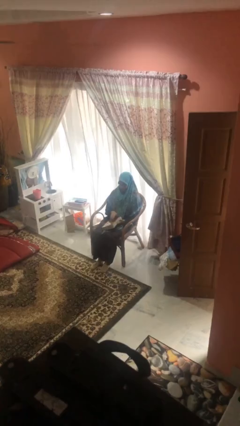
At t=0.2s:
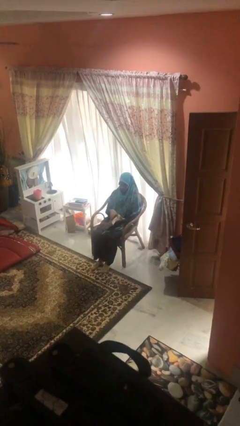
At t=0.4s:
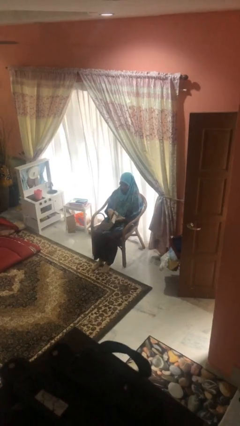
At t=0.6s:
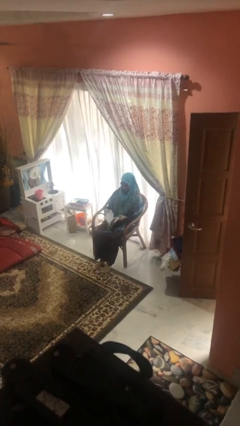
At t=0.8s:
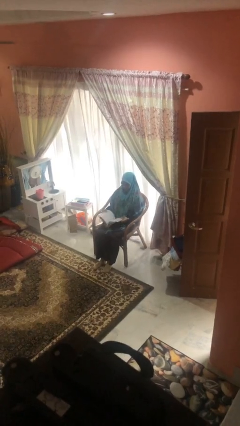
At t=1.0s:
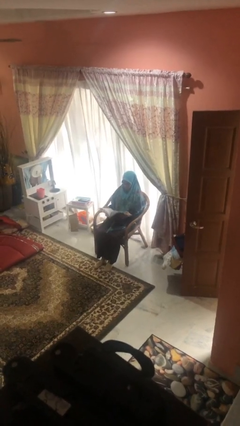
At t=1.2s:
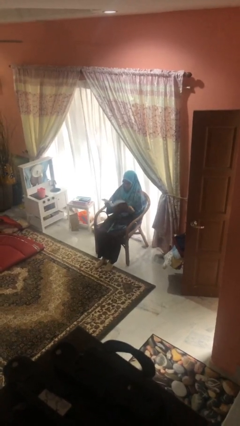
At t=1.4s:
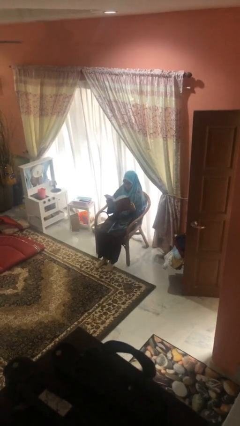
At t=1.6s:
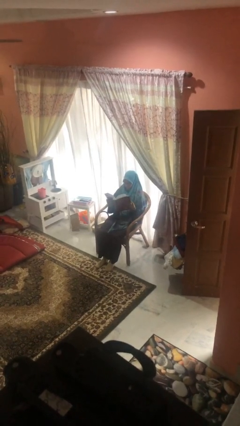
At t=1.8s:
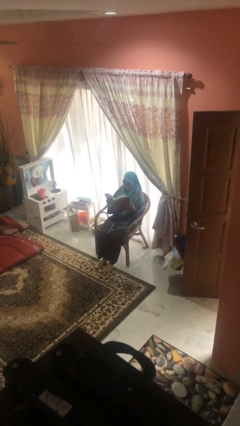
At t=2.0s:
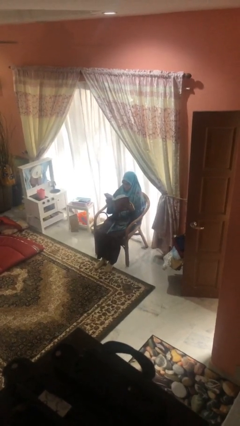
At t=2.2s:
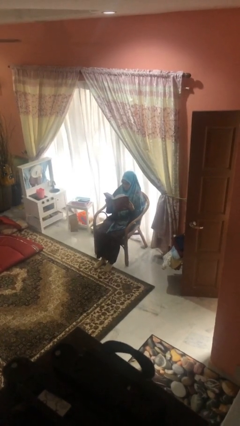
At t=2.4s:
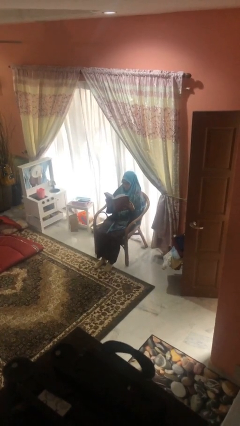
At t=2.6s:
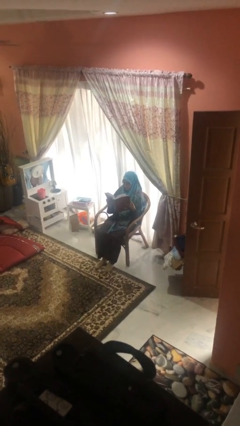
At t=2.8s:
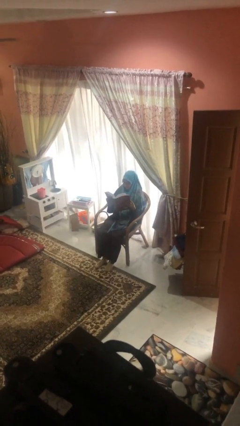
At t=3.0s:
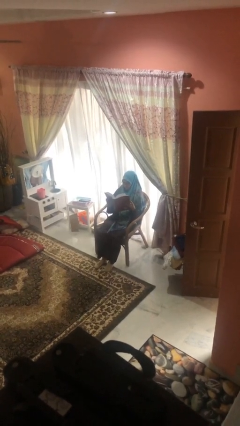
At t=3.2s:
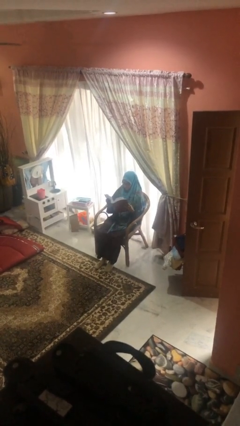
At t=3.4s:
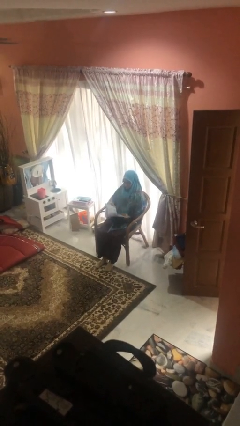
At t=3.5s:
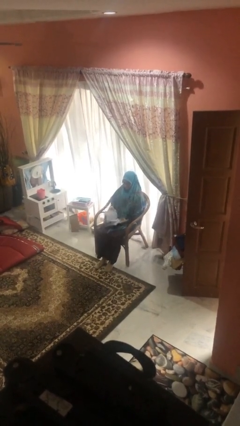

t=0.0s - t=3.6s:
person reads document

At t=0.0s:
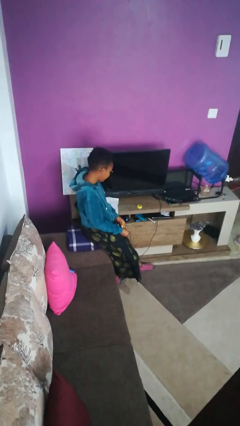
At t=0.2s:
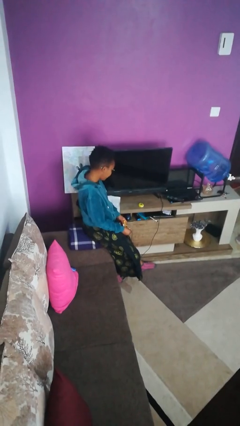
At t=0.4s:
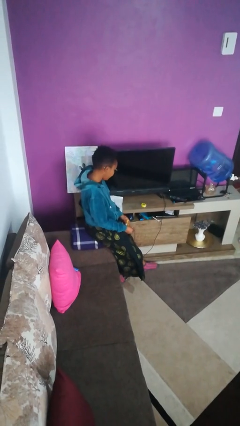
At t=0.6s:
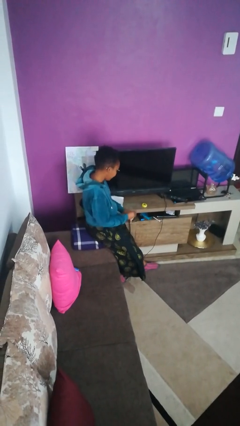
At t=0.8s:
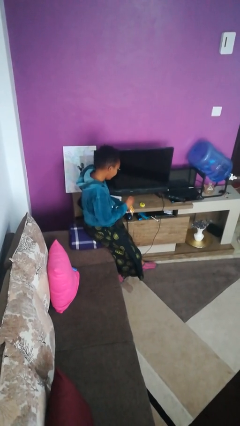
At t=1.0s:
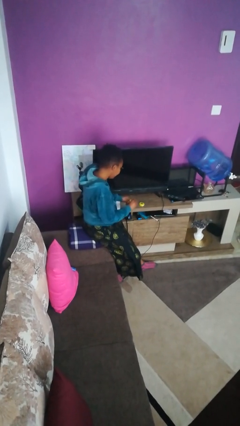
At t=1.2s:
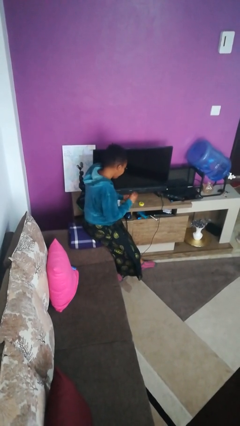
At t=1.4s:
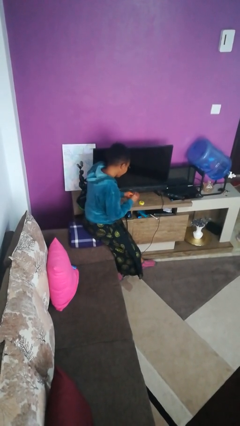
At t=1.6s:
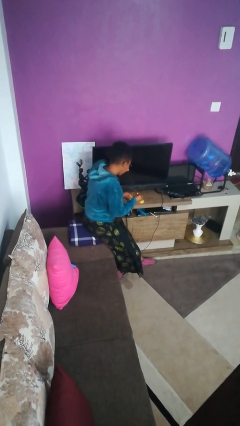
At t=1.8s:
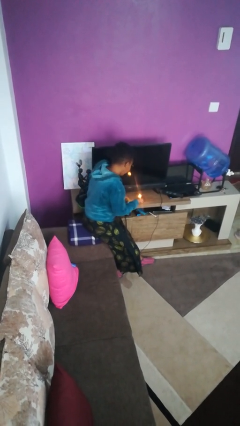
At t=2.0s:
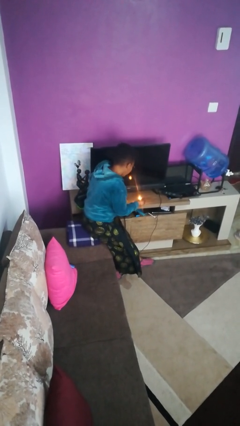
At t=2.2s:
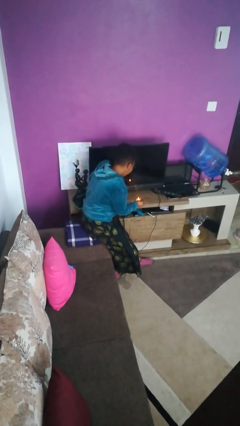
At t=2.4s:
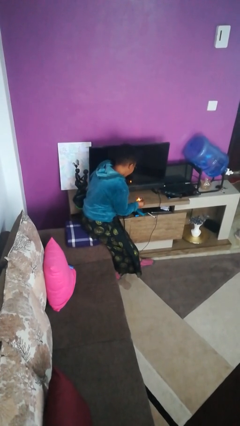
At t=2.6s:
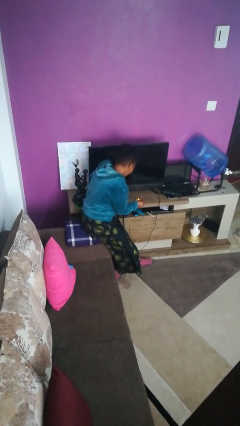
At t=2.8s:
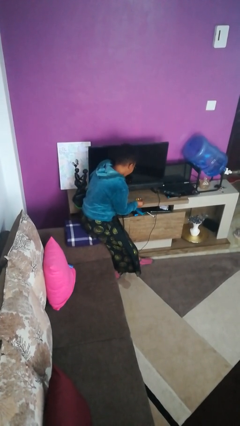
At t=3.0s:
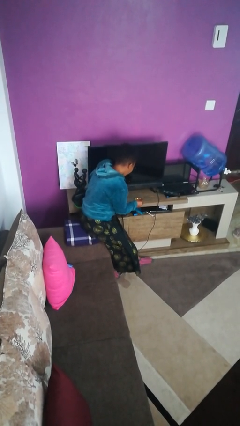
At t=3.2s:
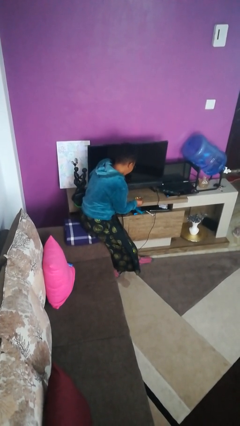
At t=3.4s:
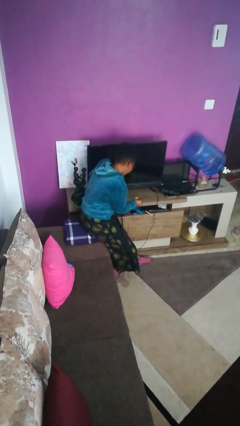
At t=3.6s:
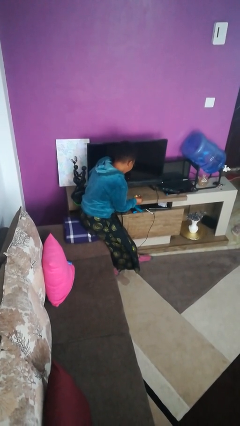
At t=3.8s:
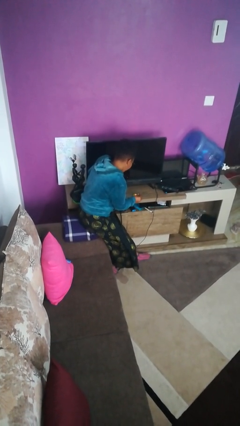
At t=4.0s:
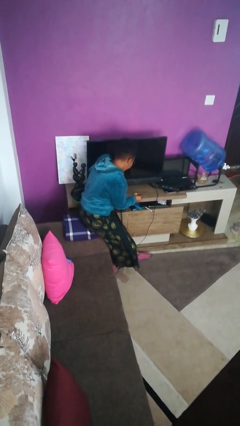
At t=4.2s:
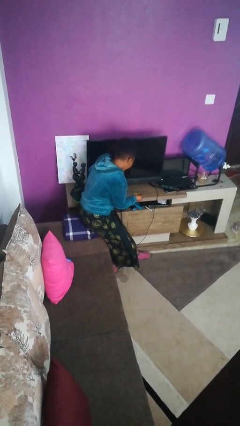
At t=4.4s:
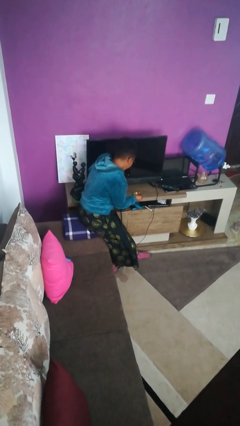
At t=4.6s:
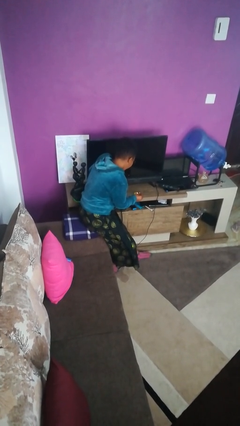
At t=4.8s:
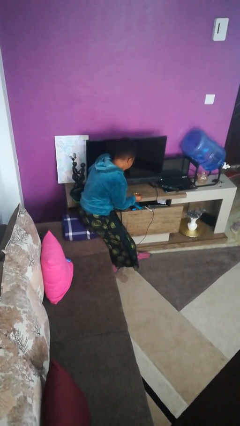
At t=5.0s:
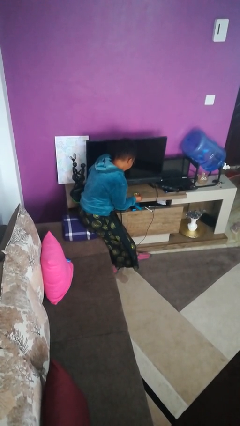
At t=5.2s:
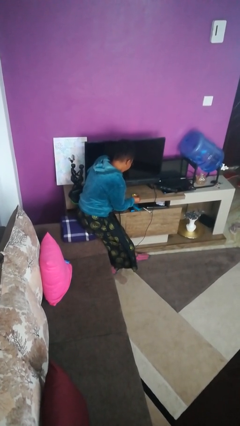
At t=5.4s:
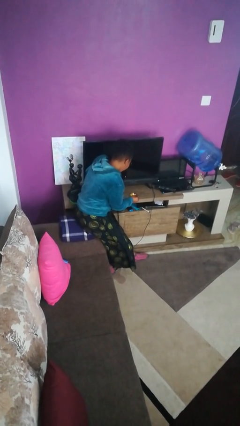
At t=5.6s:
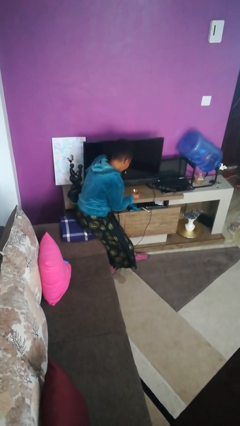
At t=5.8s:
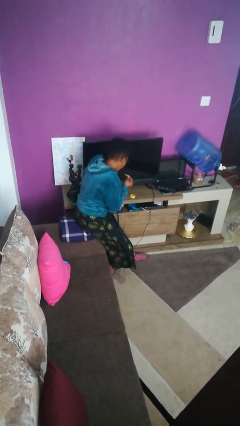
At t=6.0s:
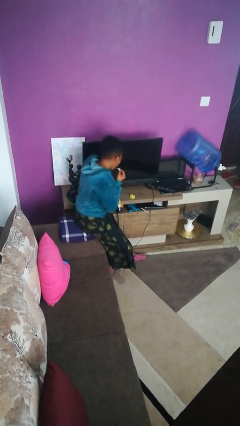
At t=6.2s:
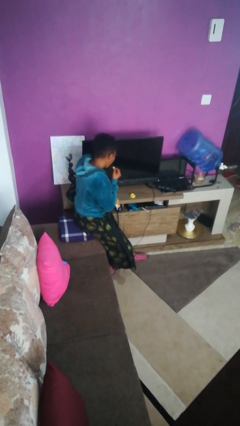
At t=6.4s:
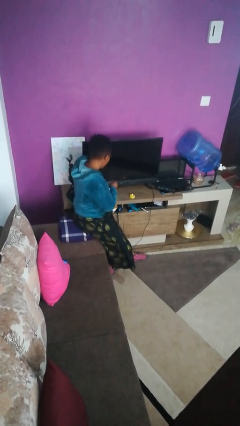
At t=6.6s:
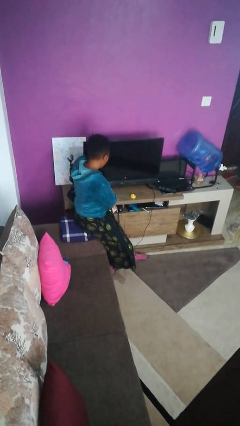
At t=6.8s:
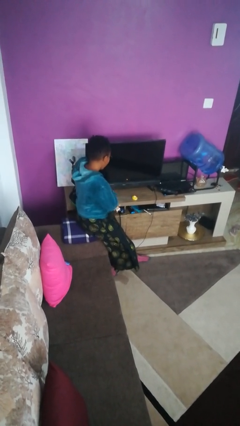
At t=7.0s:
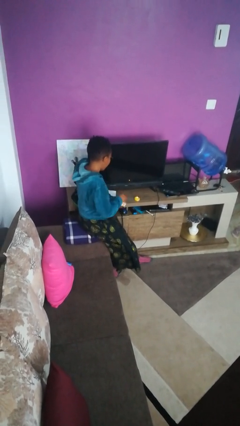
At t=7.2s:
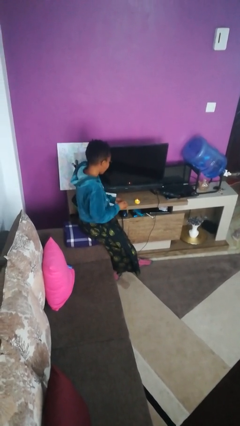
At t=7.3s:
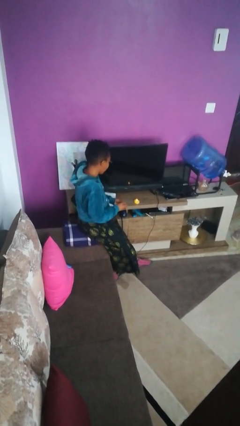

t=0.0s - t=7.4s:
person lights candle

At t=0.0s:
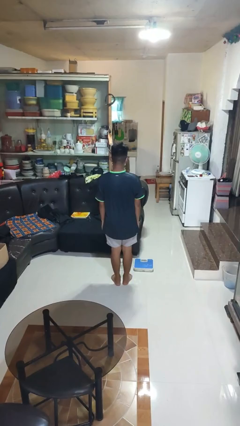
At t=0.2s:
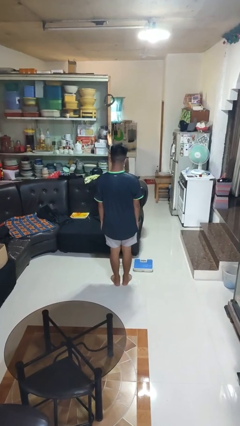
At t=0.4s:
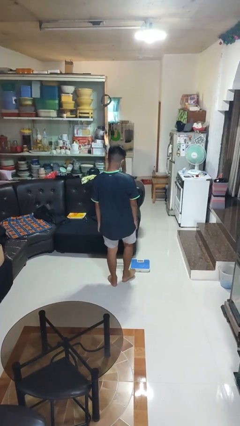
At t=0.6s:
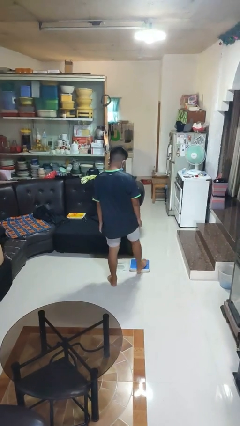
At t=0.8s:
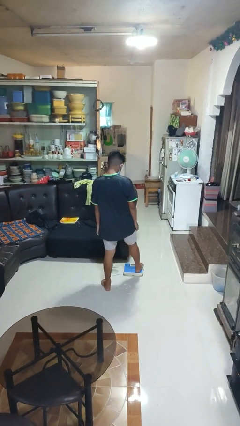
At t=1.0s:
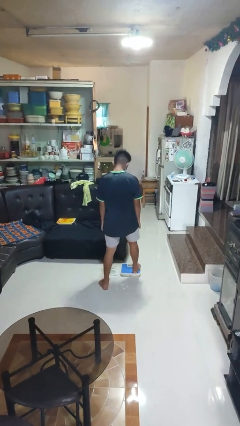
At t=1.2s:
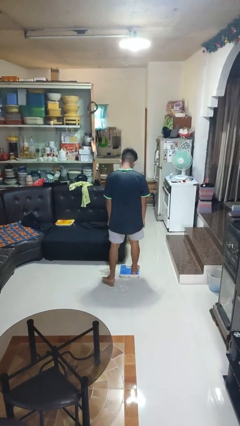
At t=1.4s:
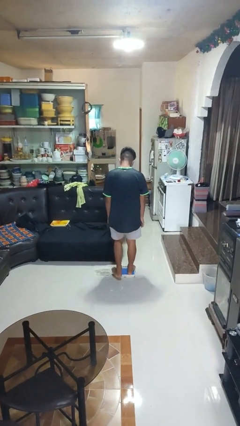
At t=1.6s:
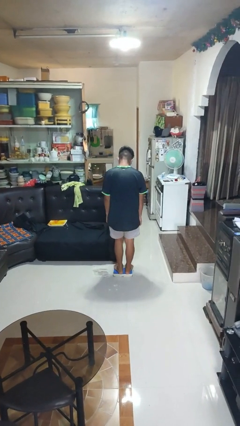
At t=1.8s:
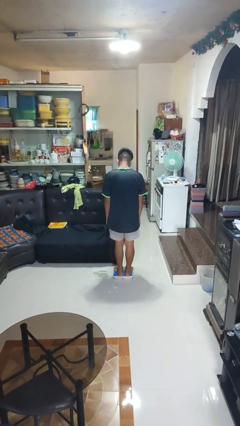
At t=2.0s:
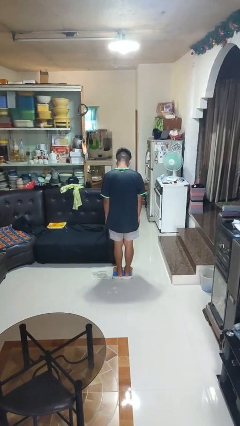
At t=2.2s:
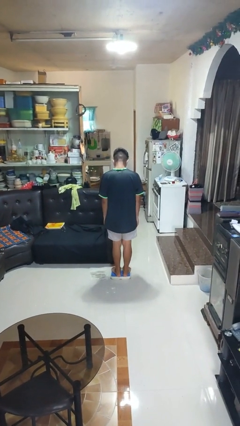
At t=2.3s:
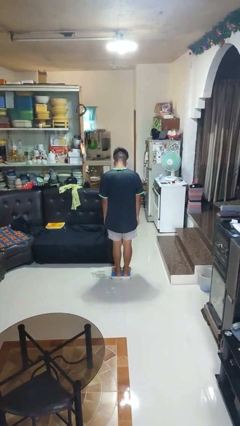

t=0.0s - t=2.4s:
person uses bodyweight scale

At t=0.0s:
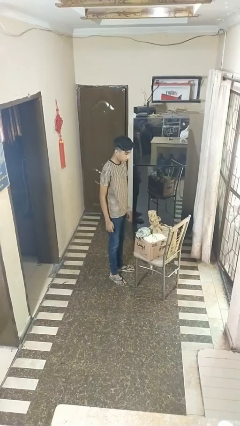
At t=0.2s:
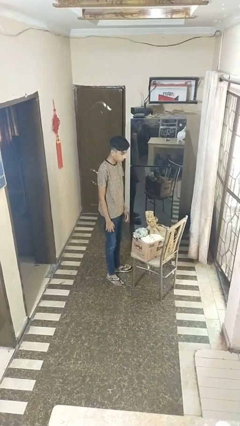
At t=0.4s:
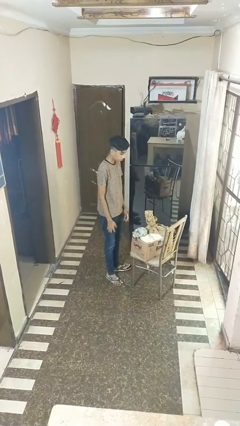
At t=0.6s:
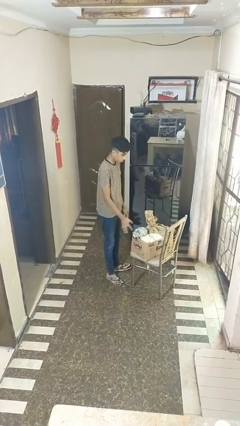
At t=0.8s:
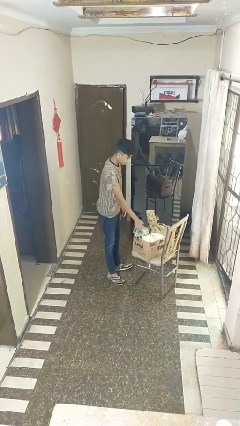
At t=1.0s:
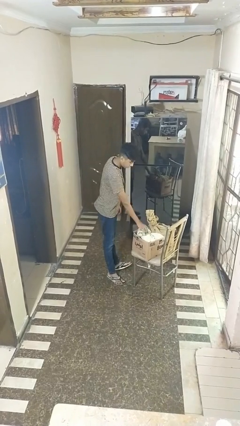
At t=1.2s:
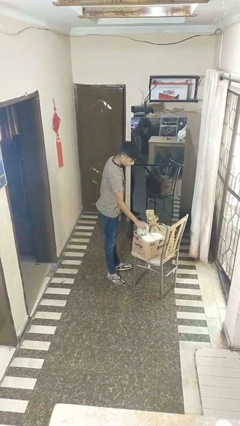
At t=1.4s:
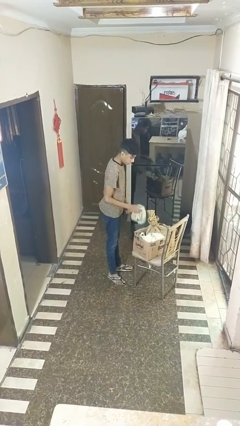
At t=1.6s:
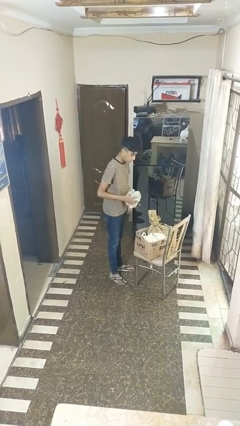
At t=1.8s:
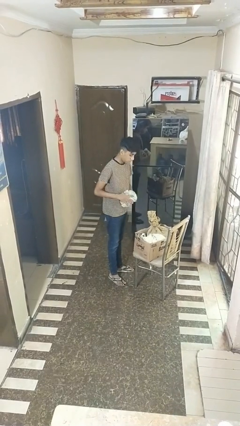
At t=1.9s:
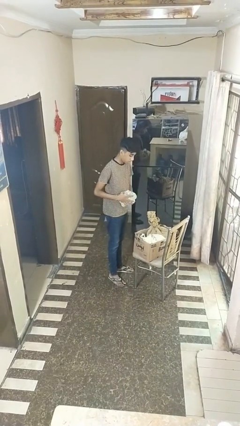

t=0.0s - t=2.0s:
person takes object from box

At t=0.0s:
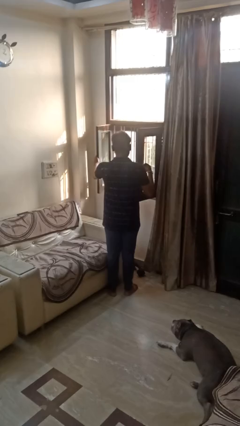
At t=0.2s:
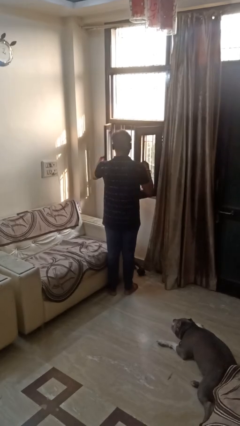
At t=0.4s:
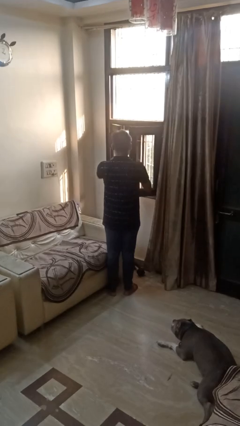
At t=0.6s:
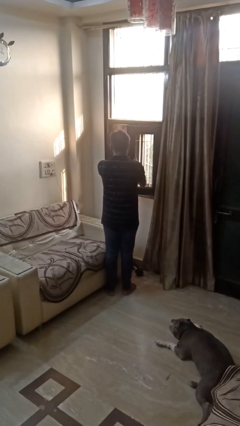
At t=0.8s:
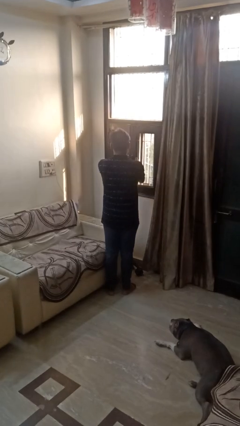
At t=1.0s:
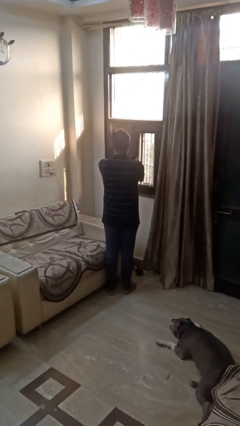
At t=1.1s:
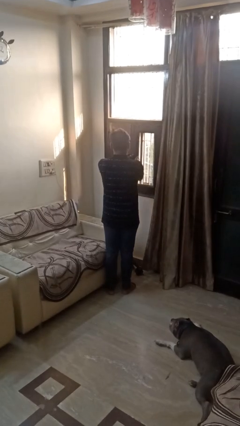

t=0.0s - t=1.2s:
person closes home window

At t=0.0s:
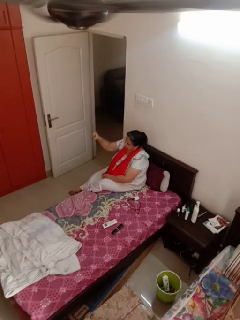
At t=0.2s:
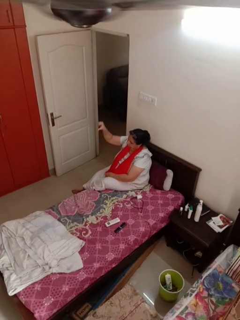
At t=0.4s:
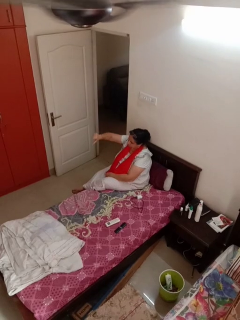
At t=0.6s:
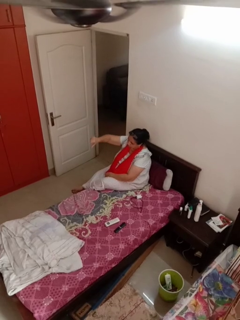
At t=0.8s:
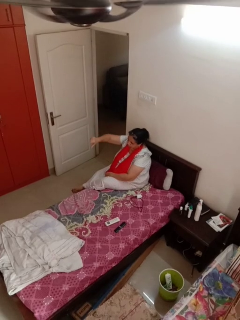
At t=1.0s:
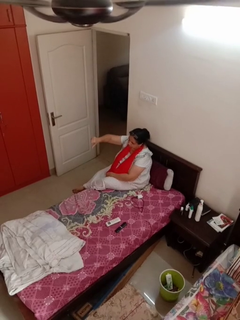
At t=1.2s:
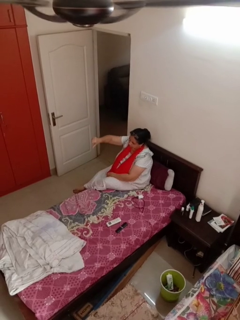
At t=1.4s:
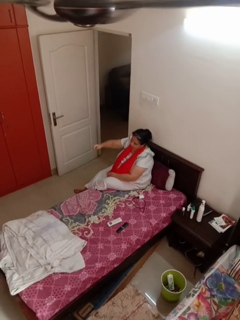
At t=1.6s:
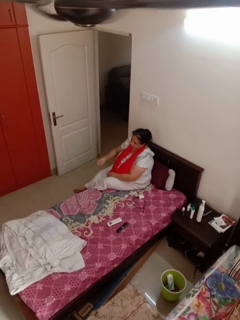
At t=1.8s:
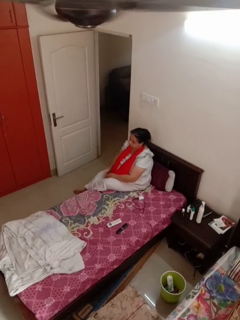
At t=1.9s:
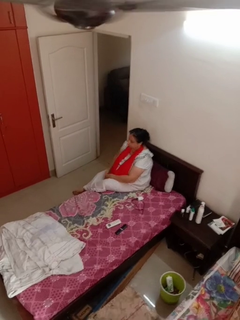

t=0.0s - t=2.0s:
person gestures thumbs down
